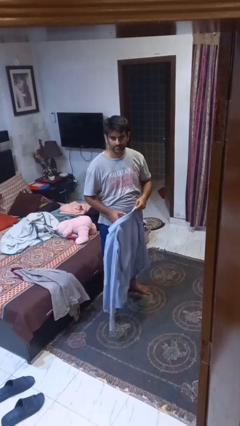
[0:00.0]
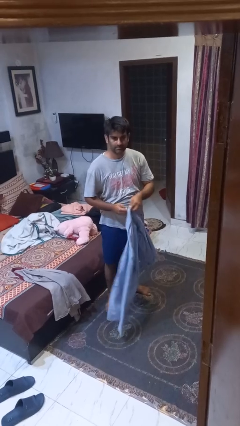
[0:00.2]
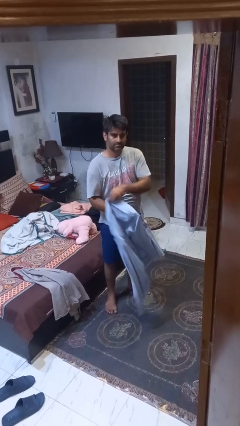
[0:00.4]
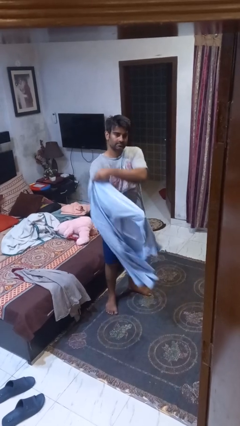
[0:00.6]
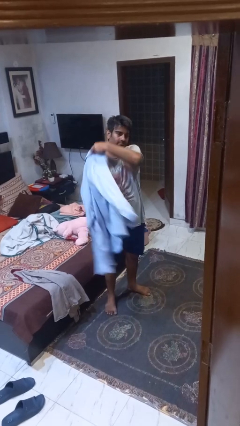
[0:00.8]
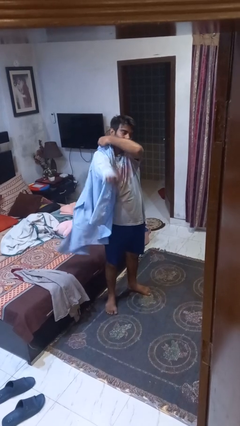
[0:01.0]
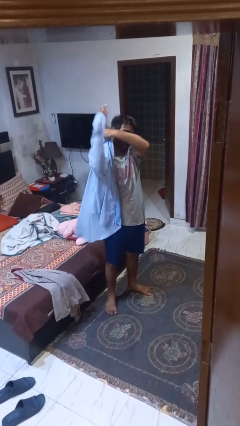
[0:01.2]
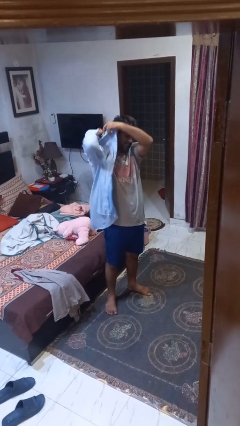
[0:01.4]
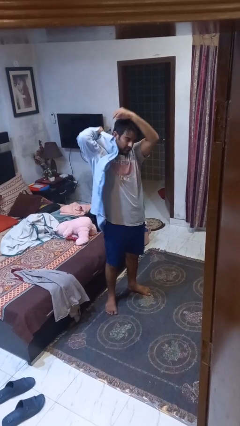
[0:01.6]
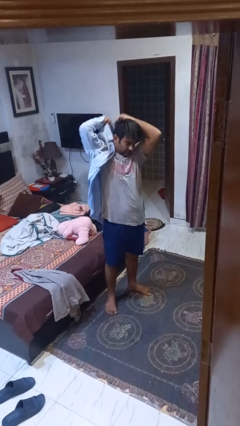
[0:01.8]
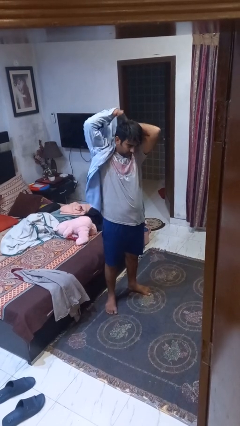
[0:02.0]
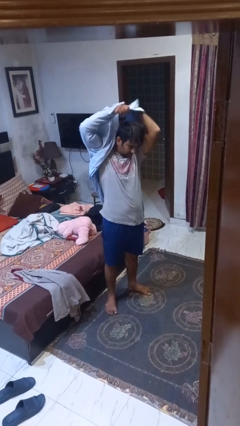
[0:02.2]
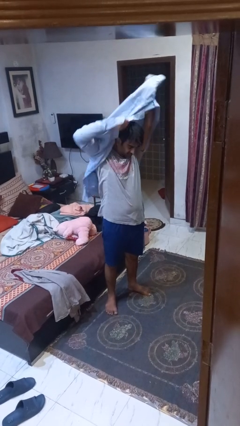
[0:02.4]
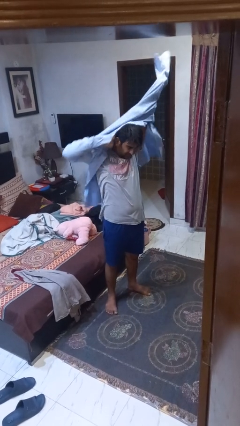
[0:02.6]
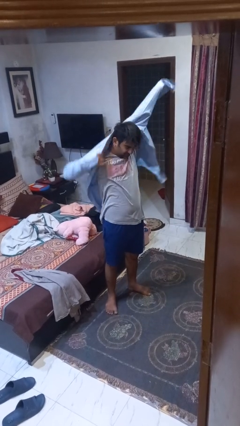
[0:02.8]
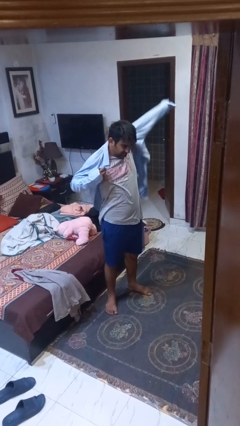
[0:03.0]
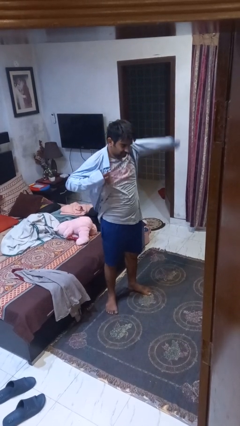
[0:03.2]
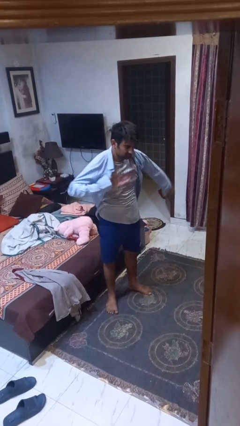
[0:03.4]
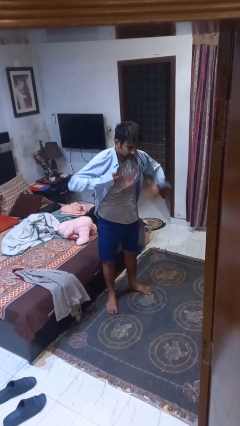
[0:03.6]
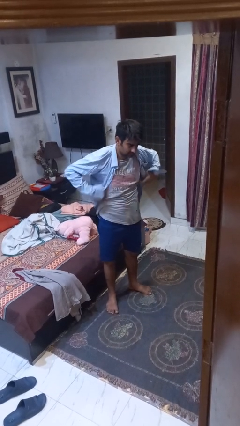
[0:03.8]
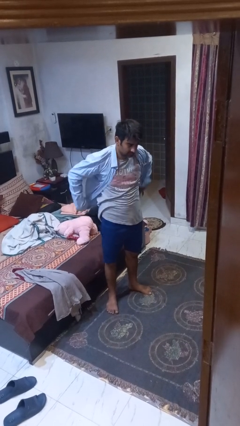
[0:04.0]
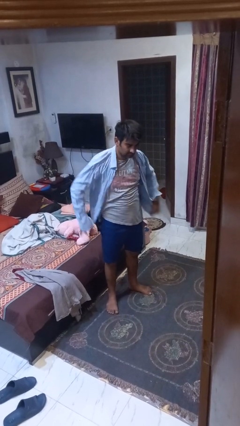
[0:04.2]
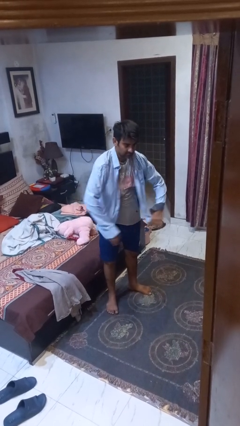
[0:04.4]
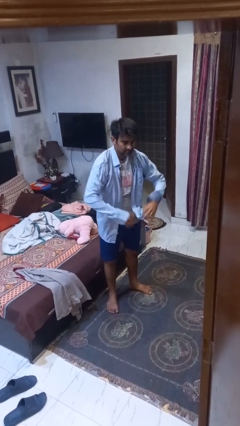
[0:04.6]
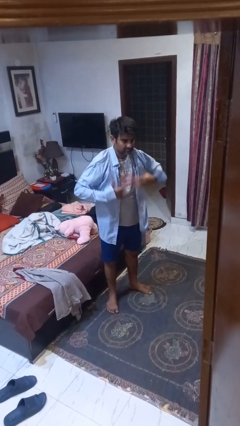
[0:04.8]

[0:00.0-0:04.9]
person puts on shirt

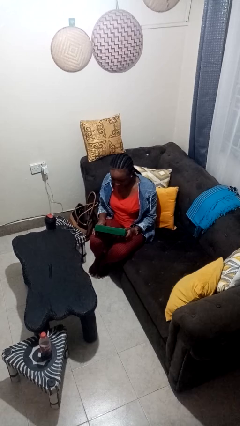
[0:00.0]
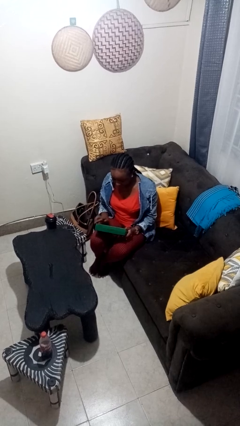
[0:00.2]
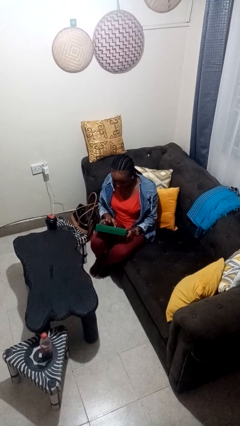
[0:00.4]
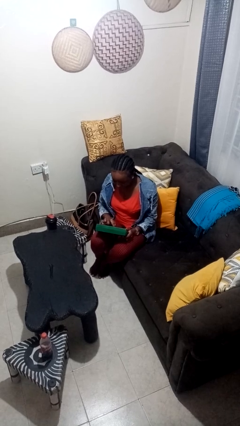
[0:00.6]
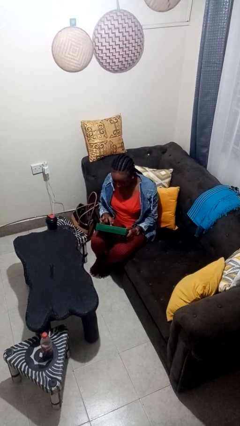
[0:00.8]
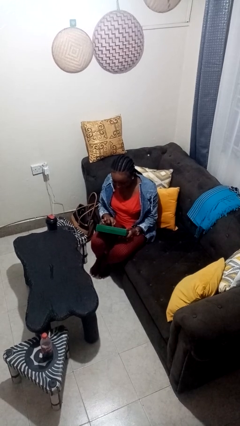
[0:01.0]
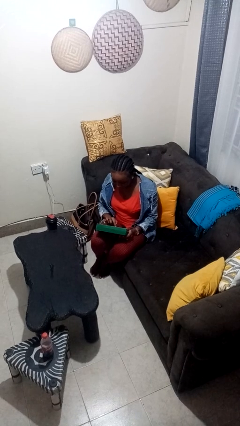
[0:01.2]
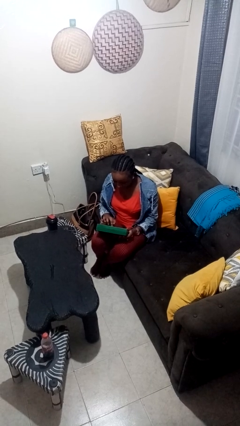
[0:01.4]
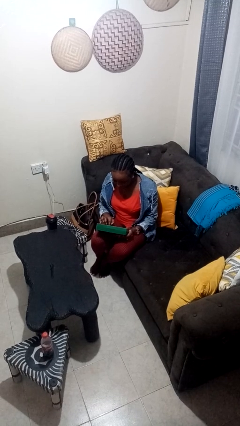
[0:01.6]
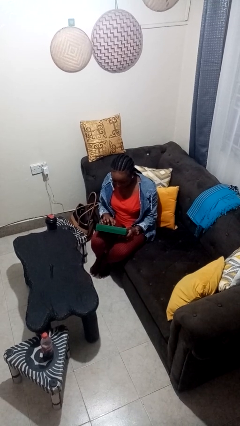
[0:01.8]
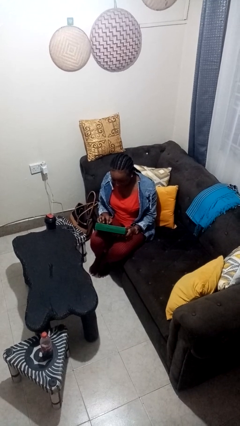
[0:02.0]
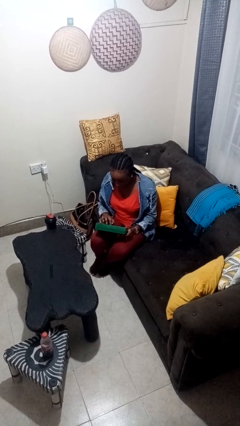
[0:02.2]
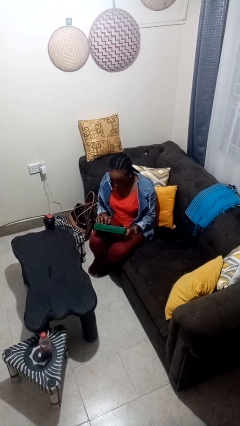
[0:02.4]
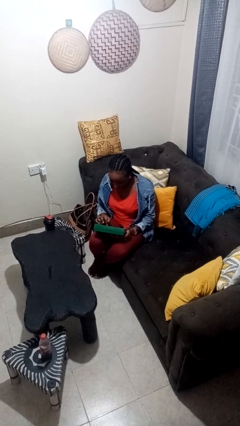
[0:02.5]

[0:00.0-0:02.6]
person interacts with handheld game

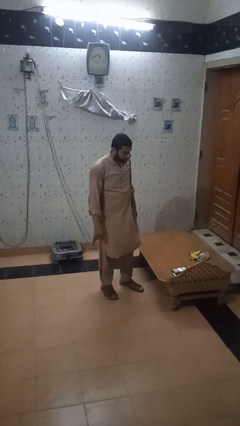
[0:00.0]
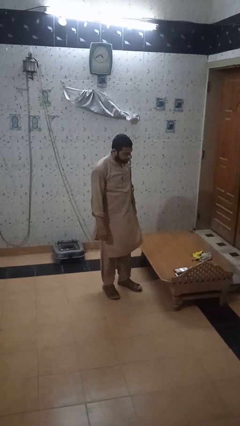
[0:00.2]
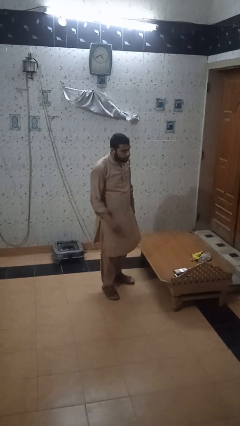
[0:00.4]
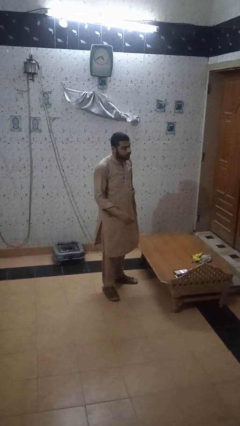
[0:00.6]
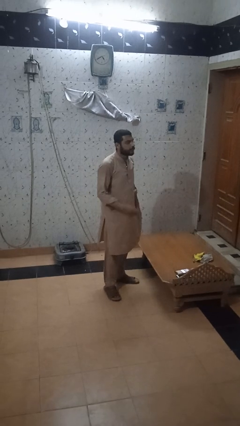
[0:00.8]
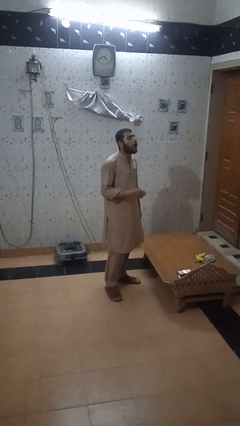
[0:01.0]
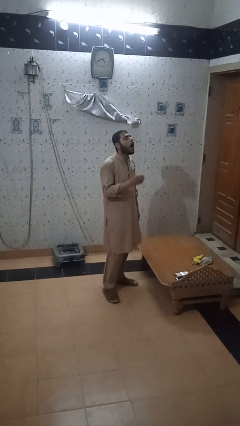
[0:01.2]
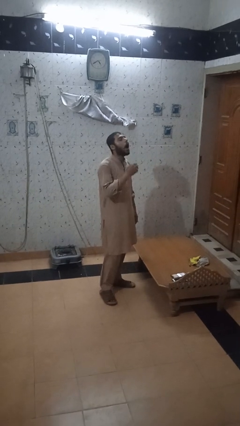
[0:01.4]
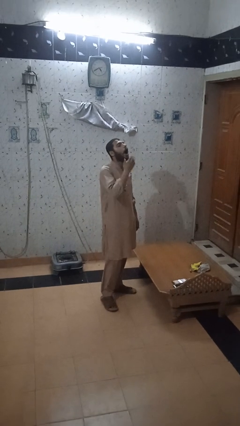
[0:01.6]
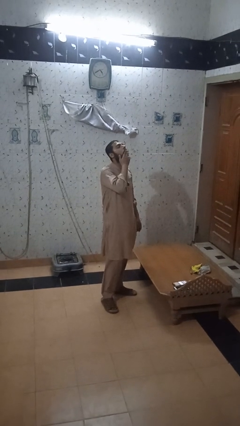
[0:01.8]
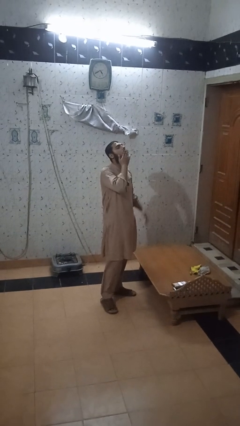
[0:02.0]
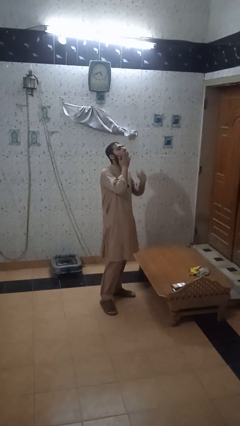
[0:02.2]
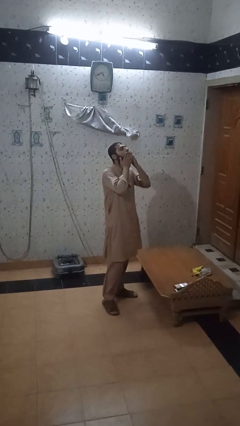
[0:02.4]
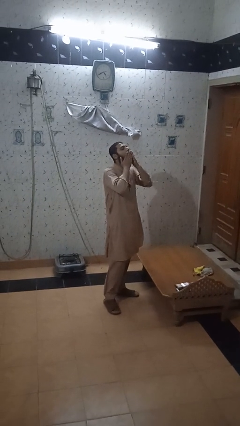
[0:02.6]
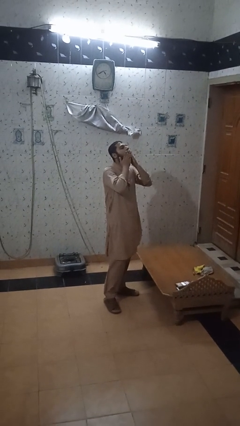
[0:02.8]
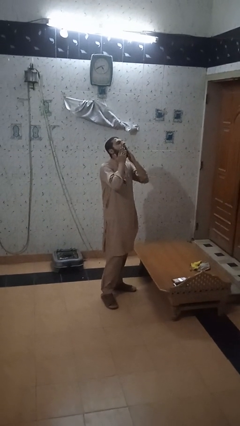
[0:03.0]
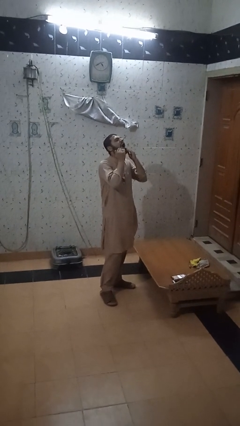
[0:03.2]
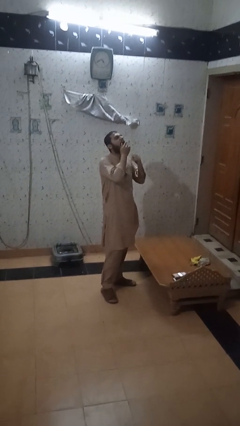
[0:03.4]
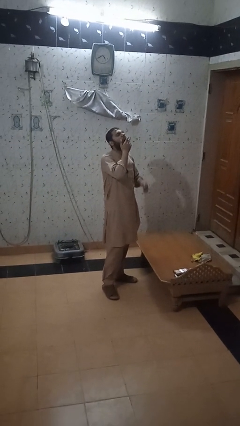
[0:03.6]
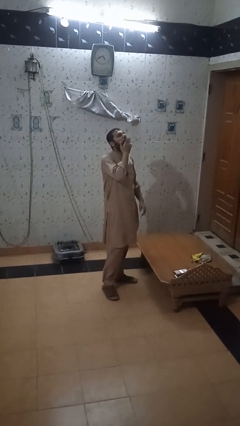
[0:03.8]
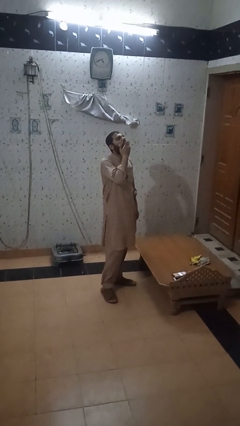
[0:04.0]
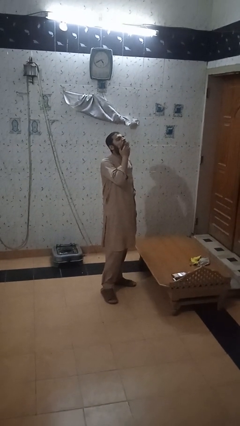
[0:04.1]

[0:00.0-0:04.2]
person yawns

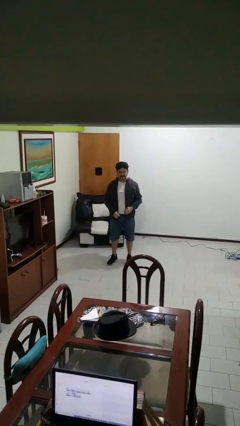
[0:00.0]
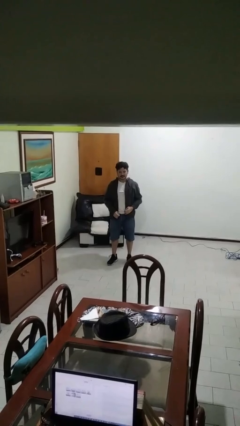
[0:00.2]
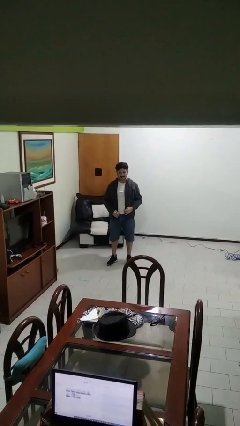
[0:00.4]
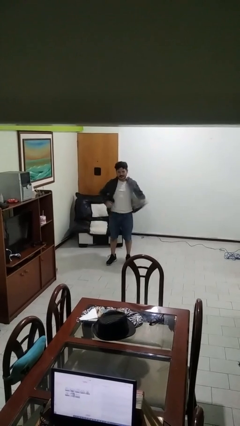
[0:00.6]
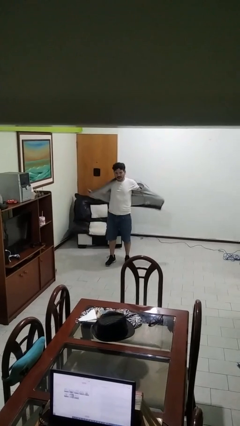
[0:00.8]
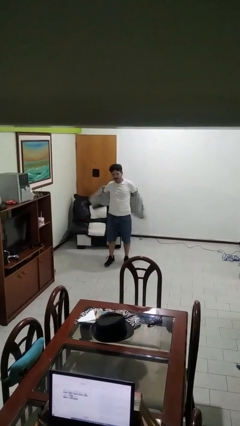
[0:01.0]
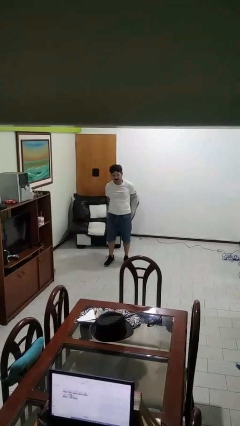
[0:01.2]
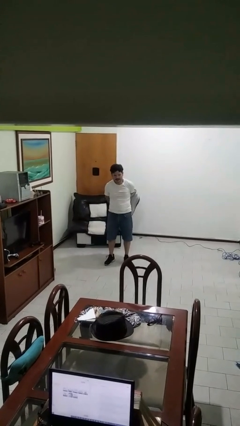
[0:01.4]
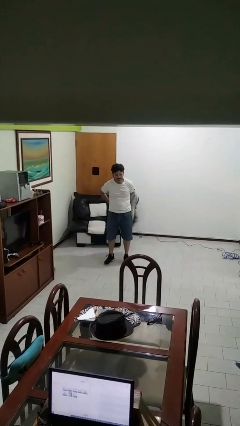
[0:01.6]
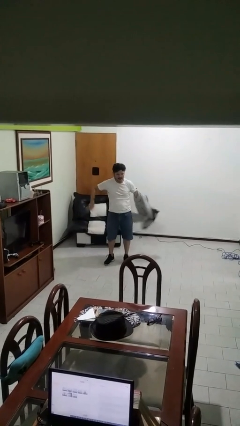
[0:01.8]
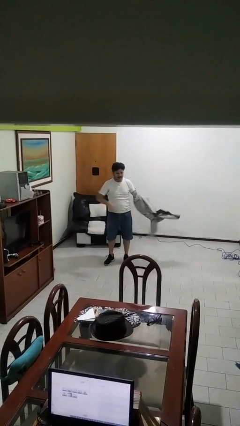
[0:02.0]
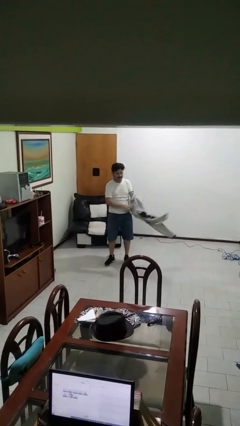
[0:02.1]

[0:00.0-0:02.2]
person takes off jacket

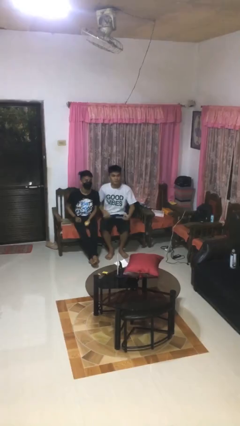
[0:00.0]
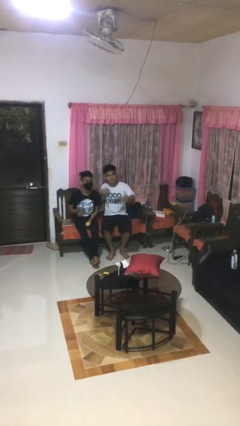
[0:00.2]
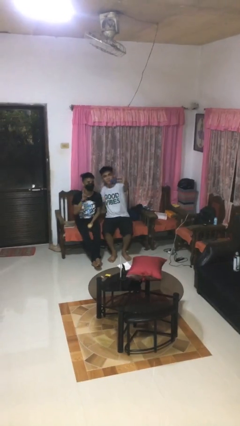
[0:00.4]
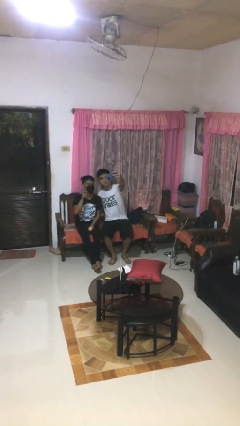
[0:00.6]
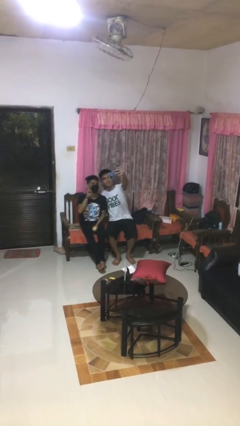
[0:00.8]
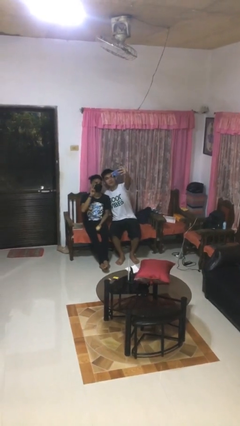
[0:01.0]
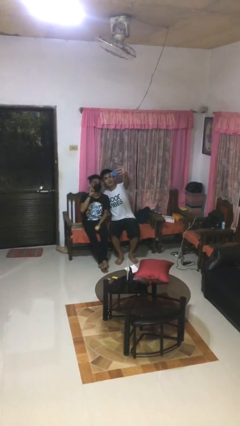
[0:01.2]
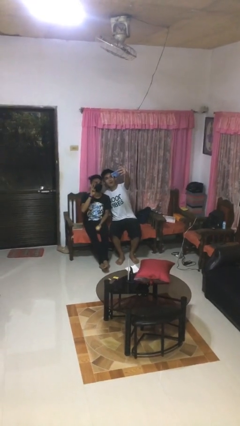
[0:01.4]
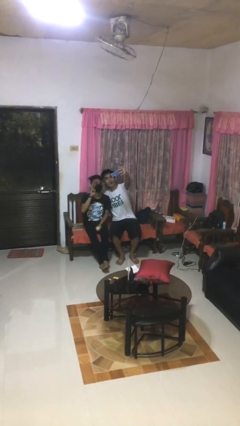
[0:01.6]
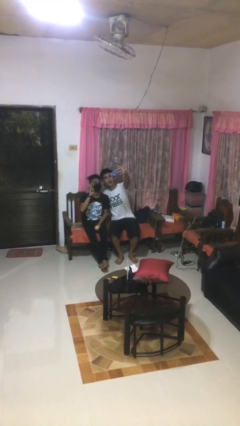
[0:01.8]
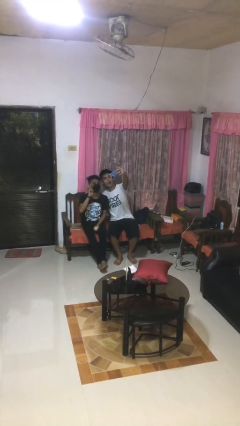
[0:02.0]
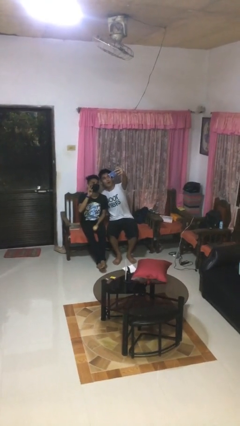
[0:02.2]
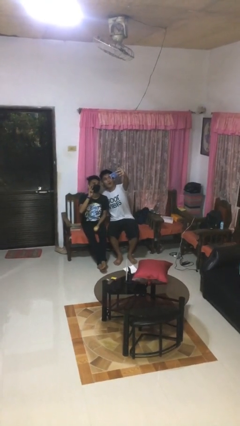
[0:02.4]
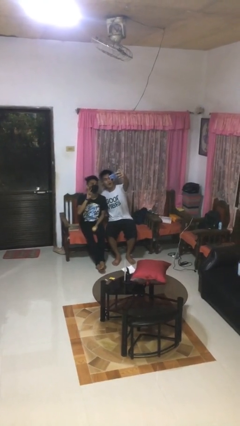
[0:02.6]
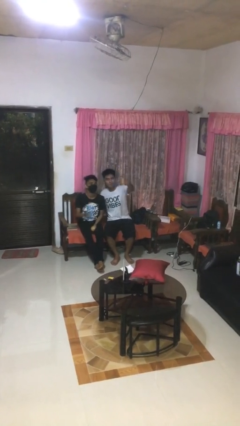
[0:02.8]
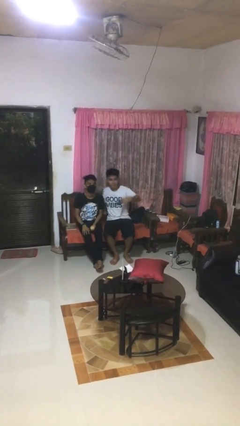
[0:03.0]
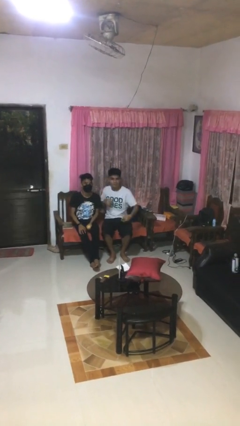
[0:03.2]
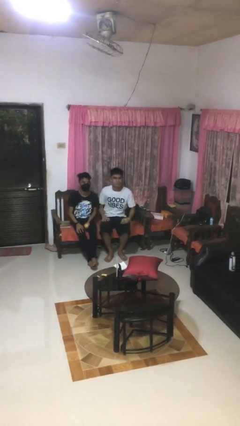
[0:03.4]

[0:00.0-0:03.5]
person takes selfie with person
